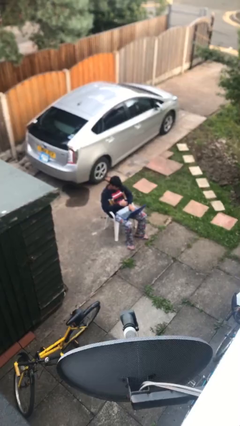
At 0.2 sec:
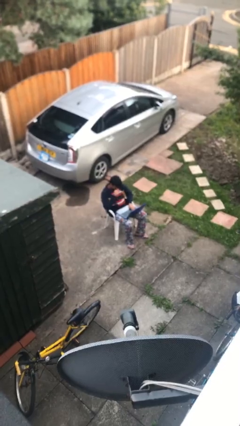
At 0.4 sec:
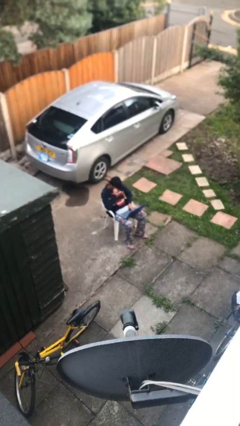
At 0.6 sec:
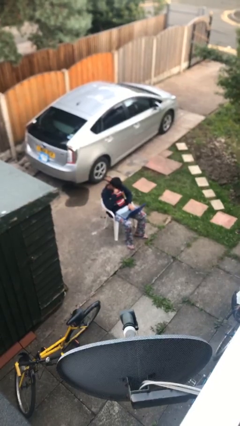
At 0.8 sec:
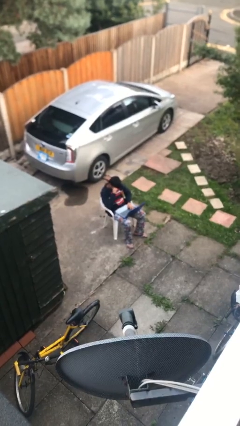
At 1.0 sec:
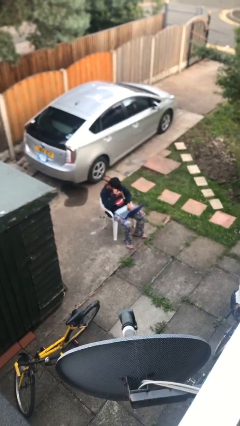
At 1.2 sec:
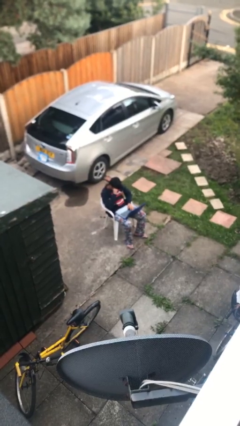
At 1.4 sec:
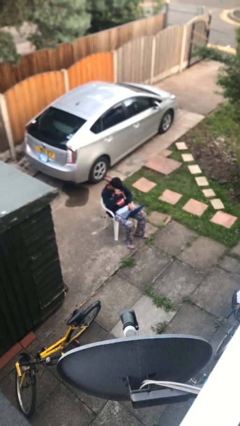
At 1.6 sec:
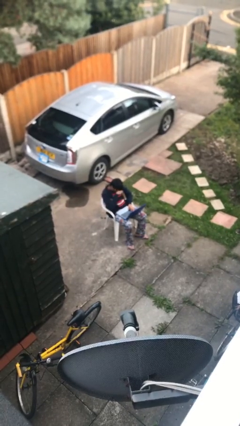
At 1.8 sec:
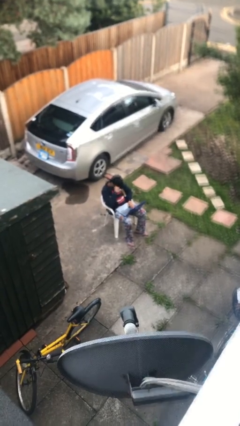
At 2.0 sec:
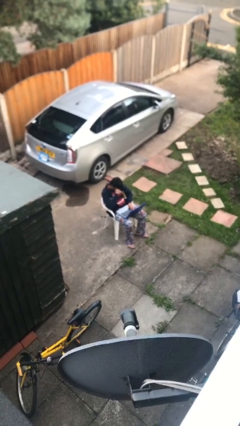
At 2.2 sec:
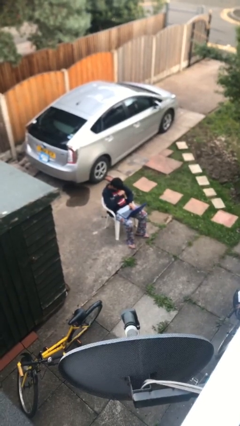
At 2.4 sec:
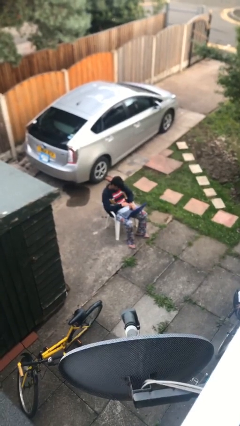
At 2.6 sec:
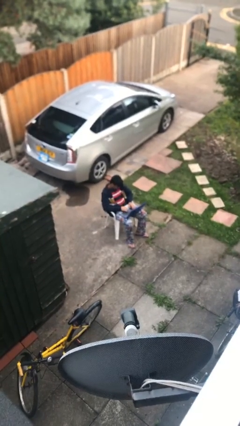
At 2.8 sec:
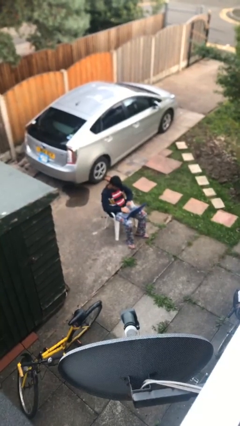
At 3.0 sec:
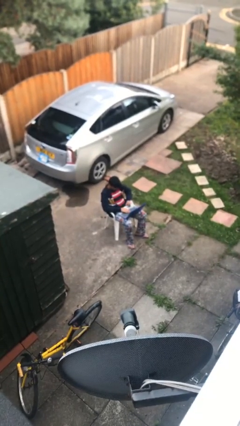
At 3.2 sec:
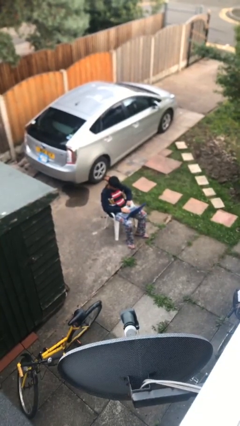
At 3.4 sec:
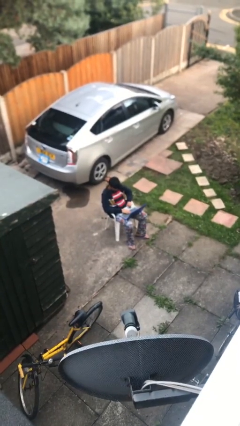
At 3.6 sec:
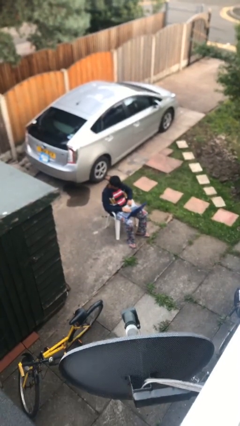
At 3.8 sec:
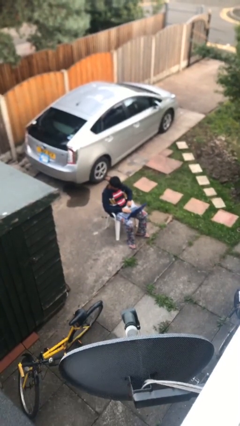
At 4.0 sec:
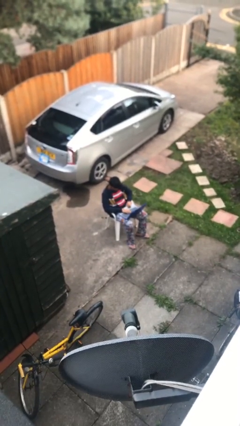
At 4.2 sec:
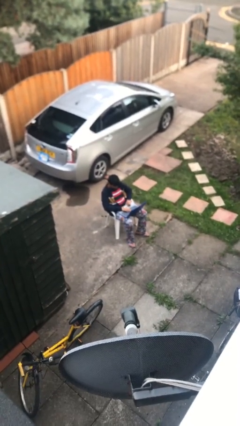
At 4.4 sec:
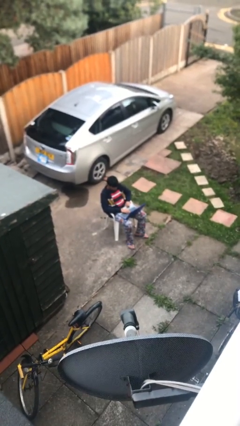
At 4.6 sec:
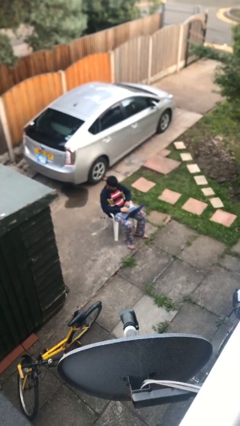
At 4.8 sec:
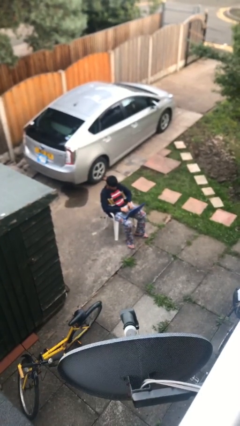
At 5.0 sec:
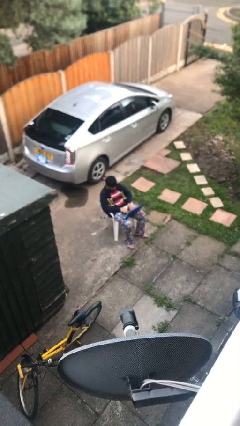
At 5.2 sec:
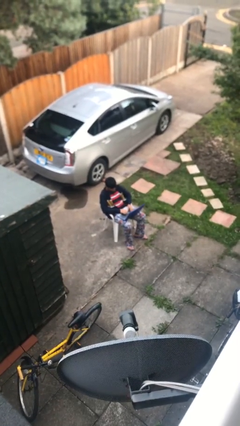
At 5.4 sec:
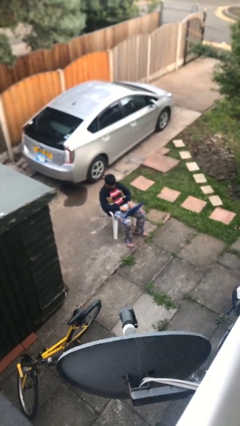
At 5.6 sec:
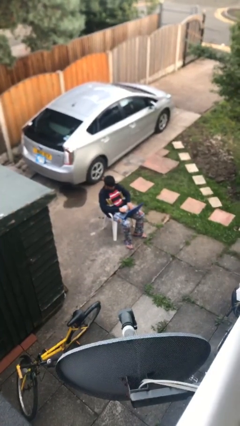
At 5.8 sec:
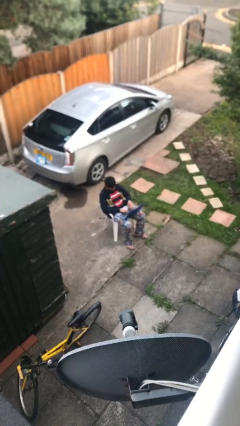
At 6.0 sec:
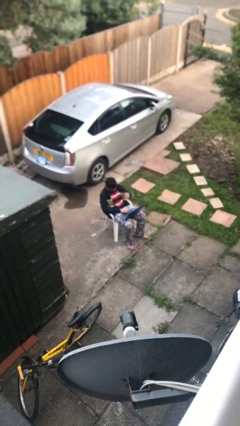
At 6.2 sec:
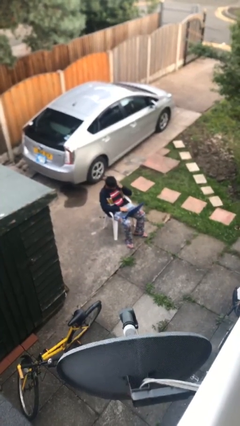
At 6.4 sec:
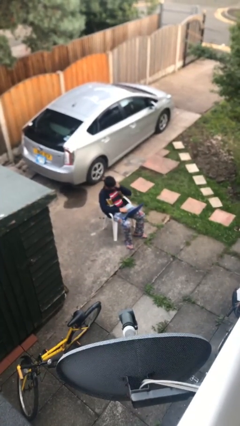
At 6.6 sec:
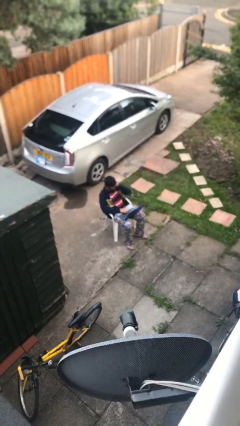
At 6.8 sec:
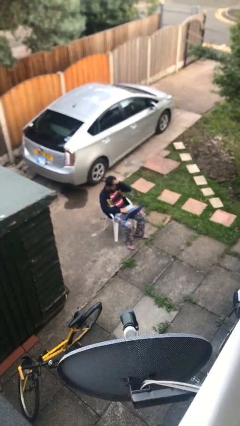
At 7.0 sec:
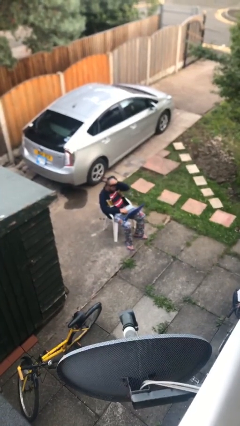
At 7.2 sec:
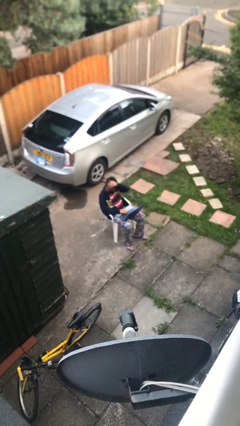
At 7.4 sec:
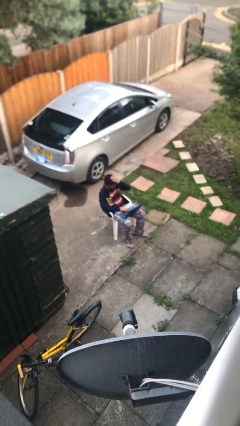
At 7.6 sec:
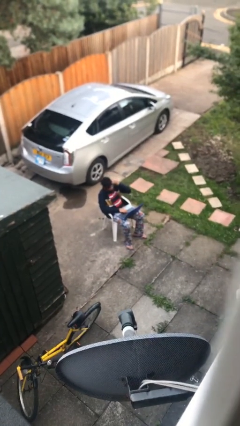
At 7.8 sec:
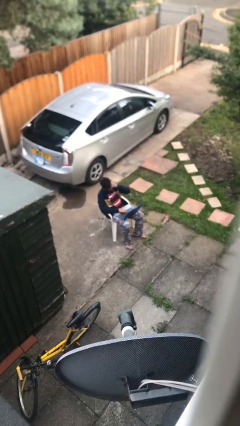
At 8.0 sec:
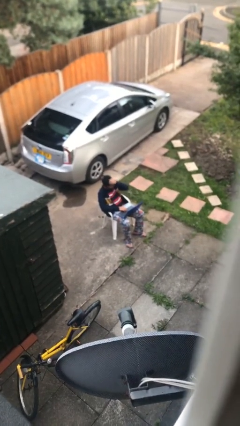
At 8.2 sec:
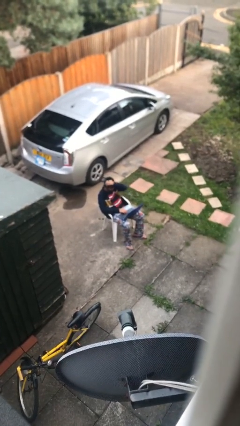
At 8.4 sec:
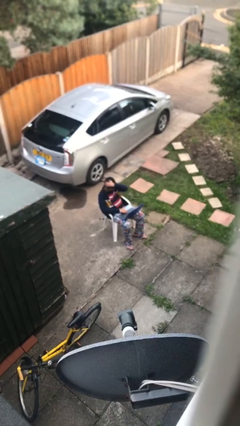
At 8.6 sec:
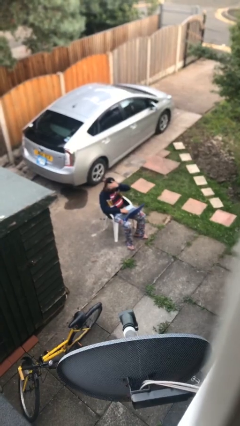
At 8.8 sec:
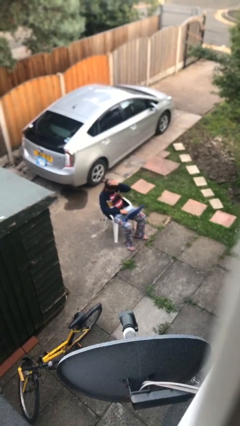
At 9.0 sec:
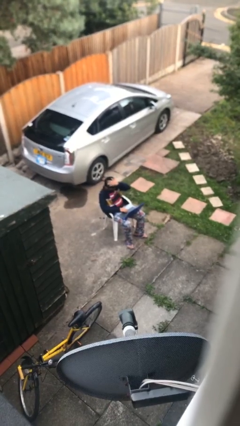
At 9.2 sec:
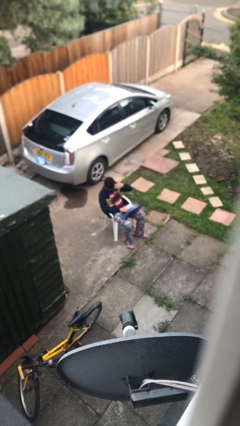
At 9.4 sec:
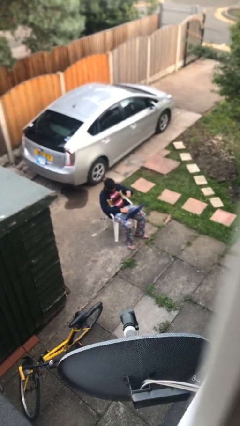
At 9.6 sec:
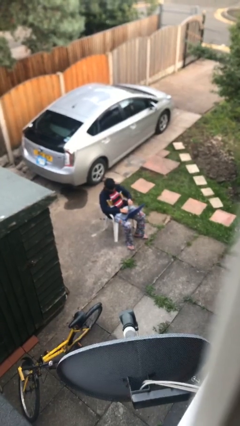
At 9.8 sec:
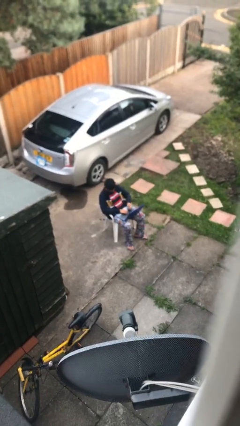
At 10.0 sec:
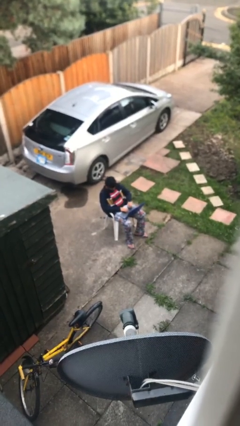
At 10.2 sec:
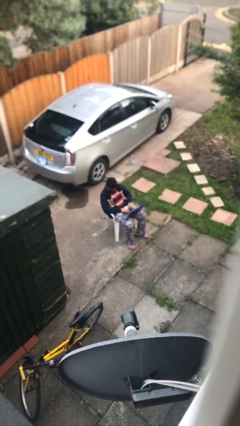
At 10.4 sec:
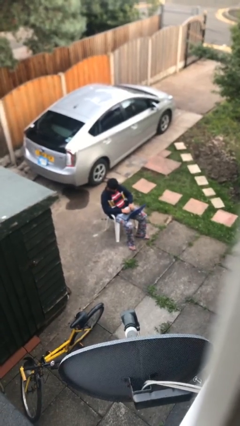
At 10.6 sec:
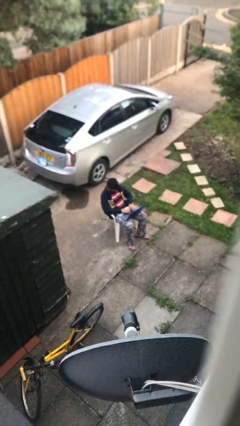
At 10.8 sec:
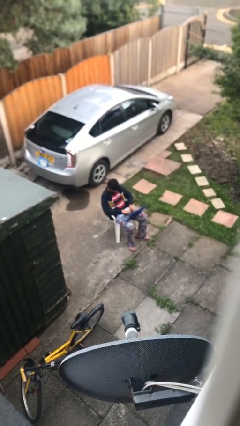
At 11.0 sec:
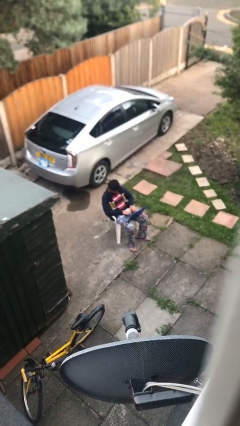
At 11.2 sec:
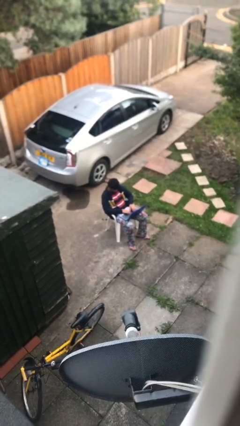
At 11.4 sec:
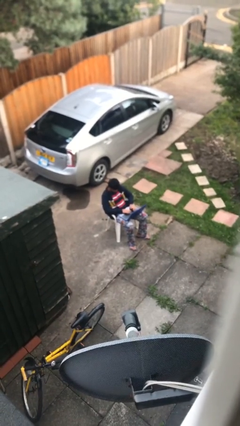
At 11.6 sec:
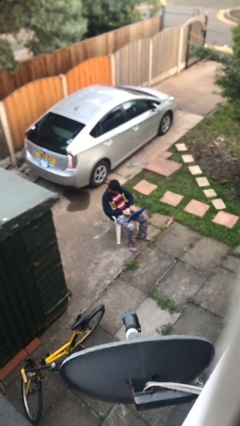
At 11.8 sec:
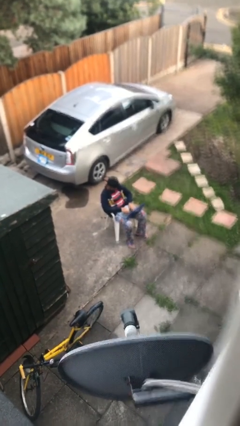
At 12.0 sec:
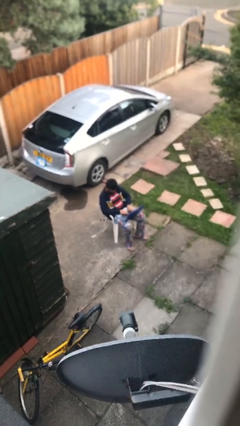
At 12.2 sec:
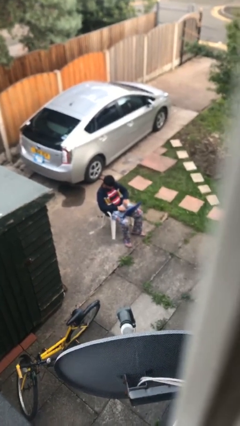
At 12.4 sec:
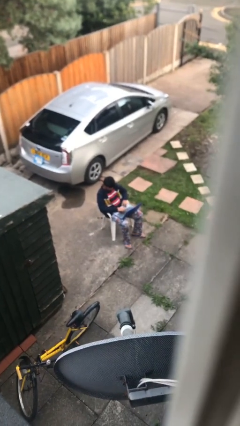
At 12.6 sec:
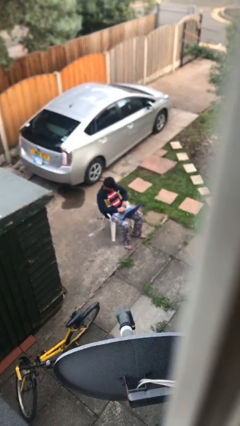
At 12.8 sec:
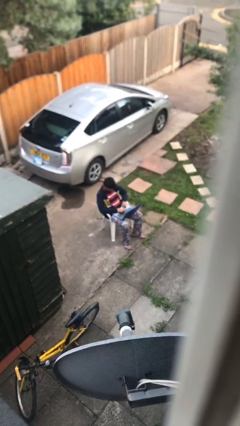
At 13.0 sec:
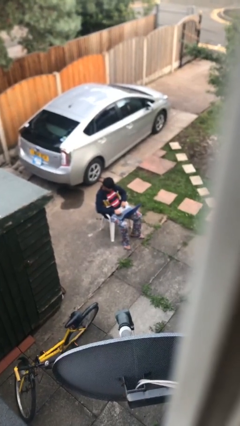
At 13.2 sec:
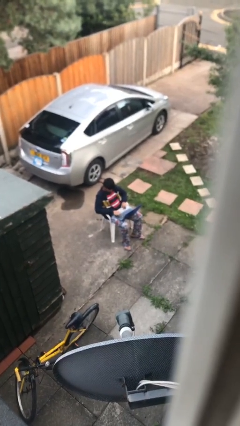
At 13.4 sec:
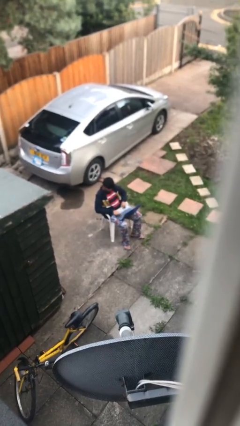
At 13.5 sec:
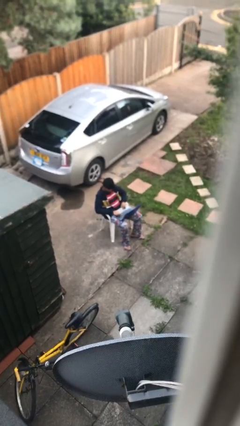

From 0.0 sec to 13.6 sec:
person interacts with laptop

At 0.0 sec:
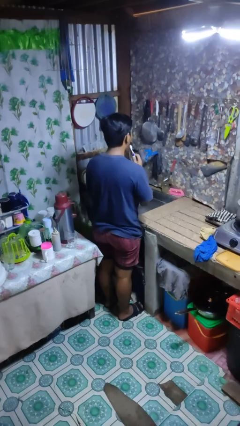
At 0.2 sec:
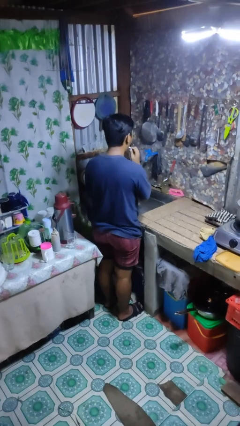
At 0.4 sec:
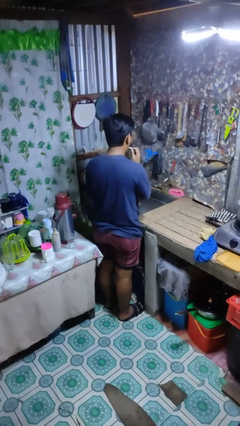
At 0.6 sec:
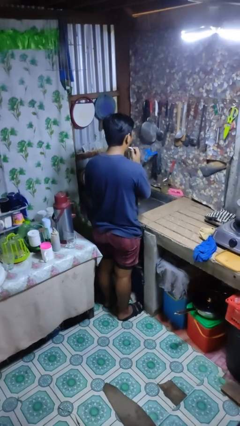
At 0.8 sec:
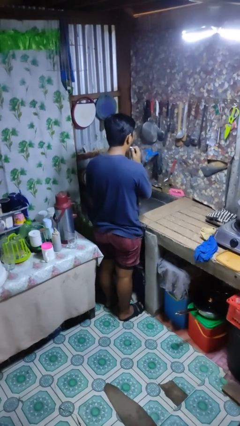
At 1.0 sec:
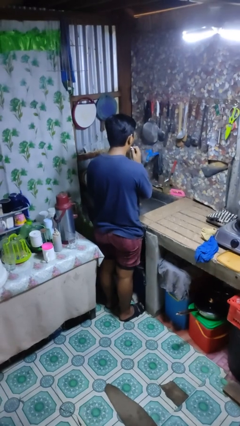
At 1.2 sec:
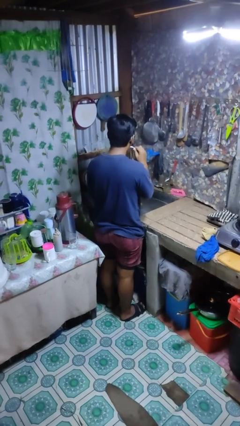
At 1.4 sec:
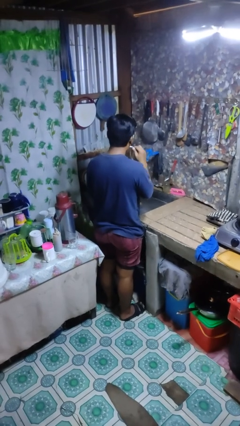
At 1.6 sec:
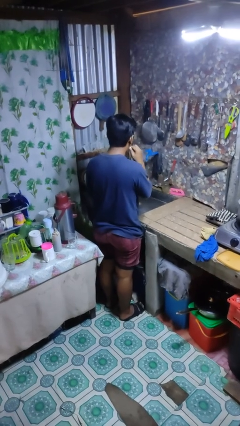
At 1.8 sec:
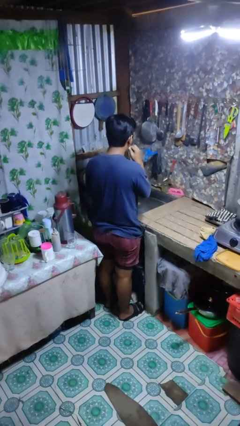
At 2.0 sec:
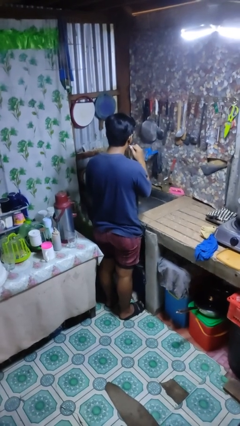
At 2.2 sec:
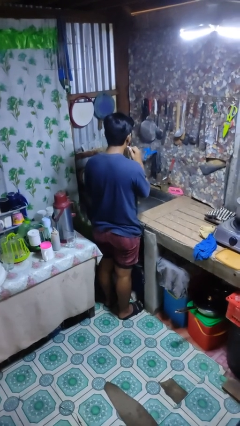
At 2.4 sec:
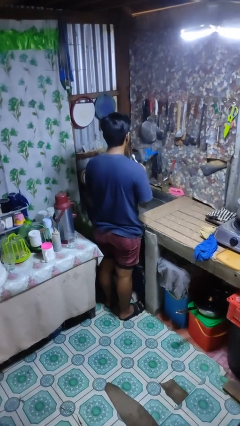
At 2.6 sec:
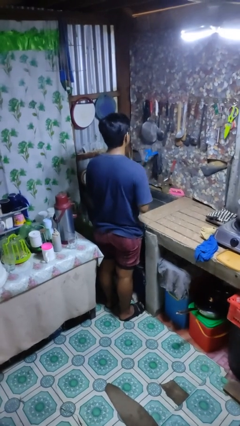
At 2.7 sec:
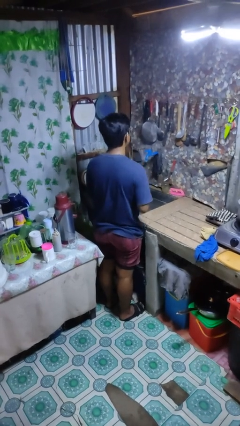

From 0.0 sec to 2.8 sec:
person brushes teeth

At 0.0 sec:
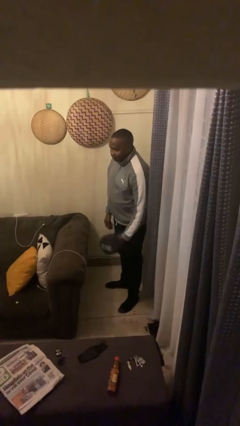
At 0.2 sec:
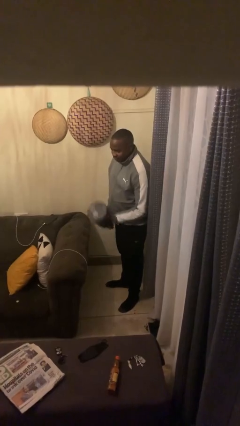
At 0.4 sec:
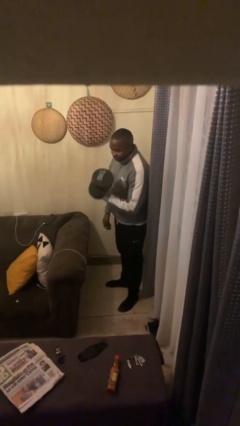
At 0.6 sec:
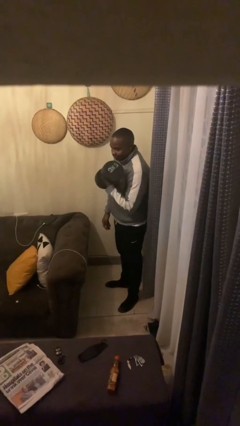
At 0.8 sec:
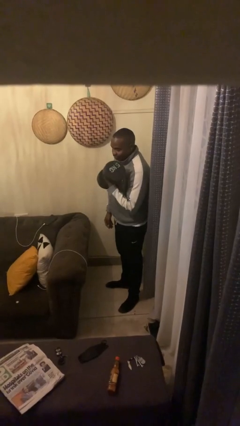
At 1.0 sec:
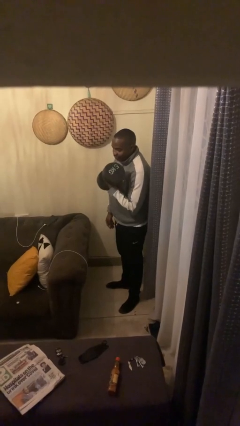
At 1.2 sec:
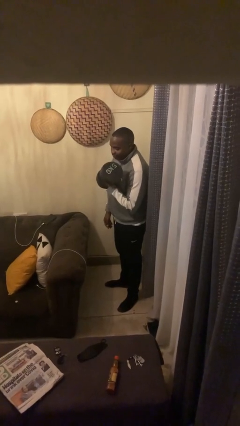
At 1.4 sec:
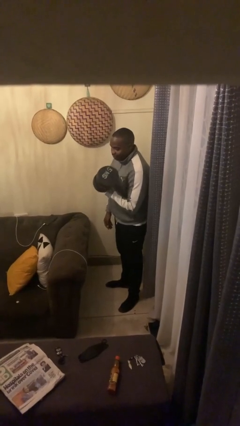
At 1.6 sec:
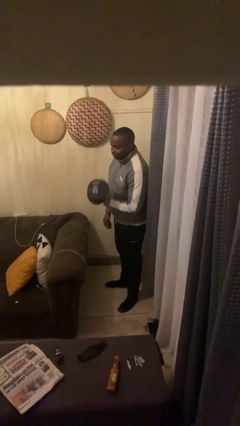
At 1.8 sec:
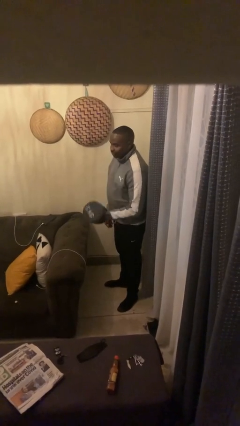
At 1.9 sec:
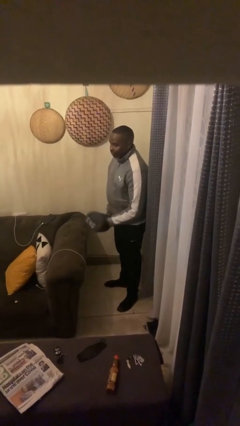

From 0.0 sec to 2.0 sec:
person lifts dumbbells
